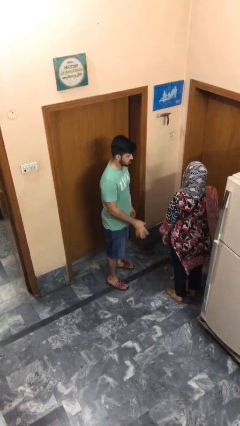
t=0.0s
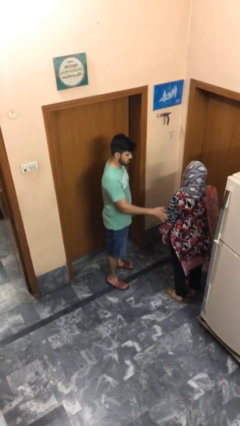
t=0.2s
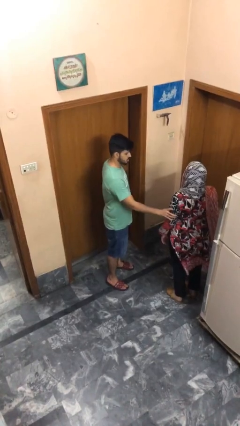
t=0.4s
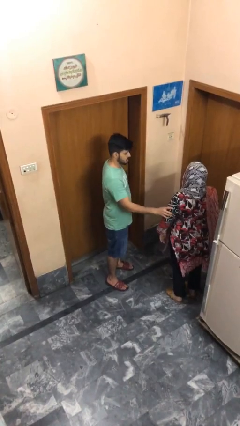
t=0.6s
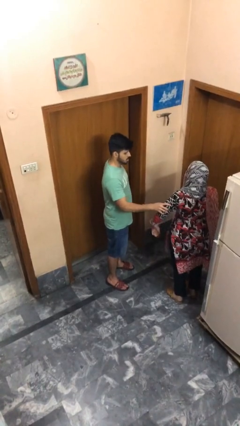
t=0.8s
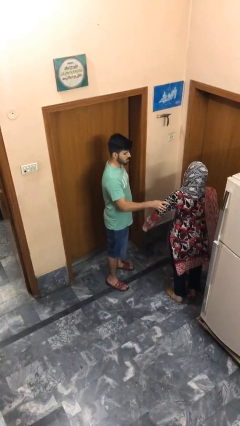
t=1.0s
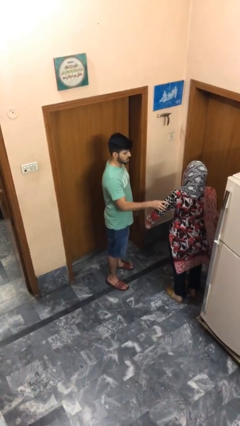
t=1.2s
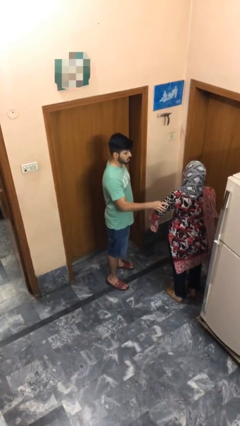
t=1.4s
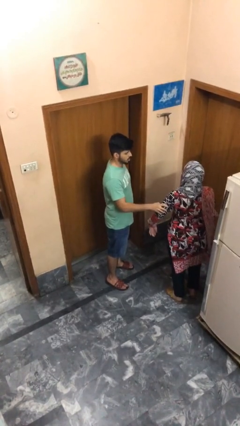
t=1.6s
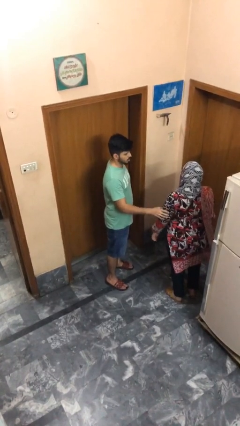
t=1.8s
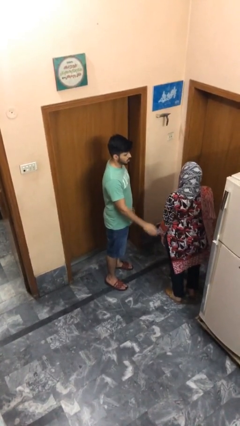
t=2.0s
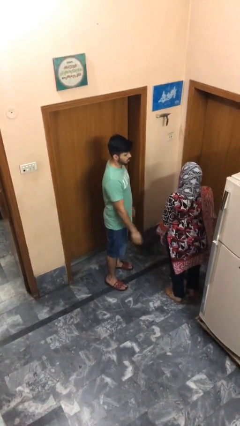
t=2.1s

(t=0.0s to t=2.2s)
person grabs person by bicep

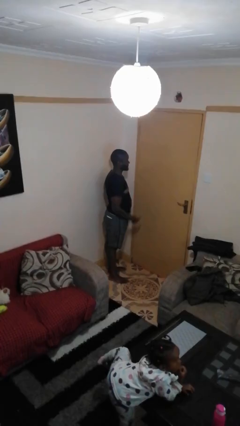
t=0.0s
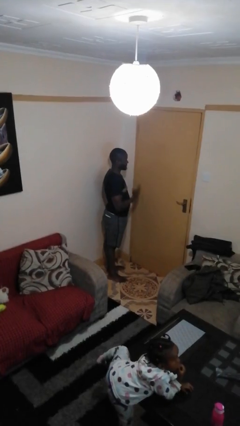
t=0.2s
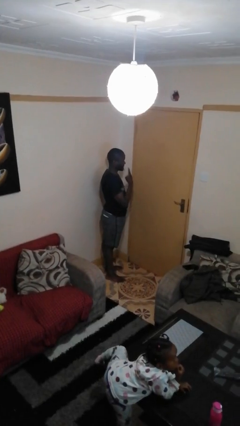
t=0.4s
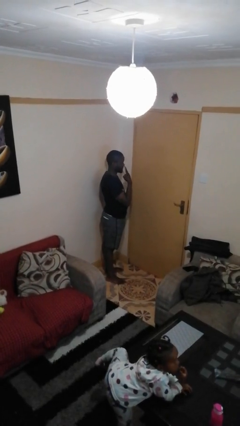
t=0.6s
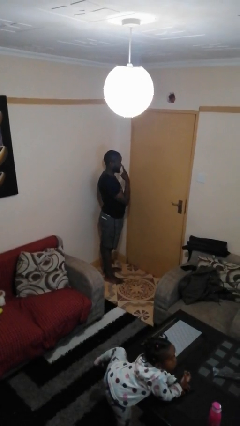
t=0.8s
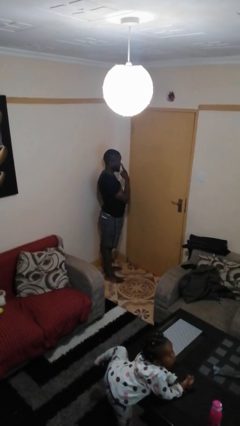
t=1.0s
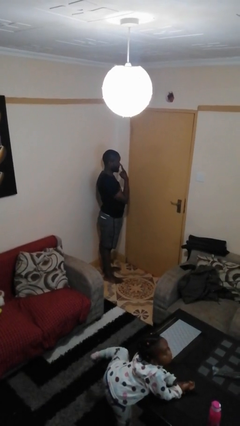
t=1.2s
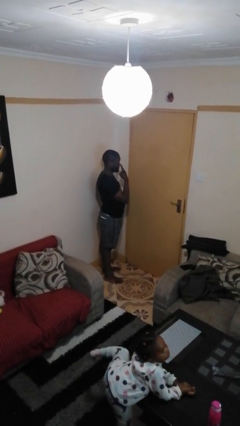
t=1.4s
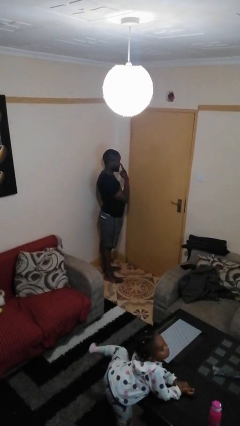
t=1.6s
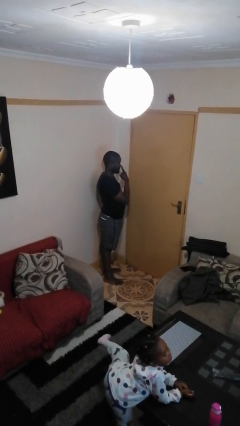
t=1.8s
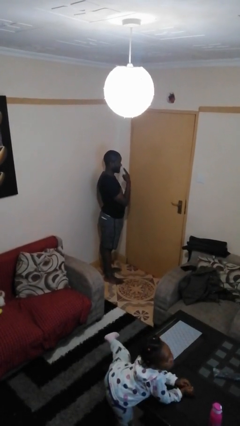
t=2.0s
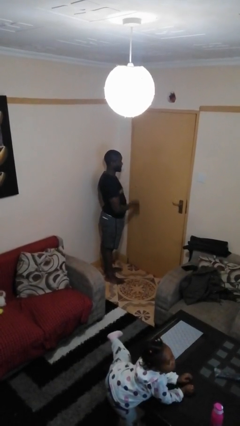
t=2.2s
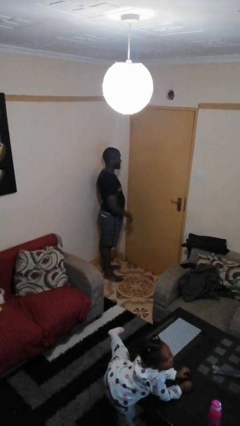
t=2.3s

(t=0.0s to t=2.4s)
person gestures watch closely

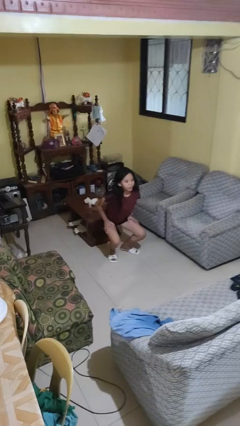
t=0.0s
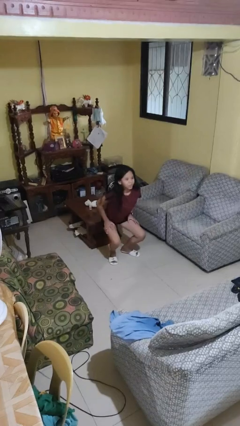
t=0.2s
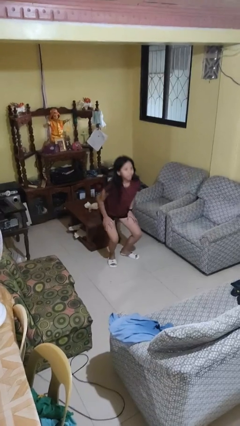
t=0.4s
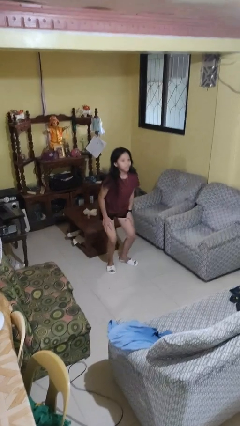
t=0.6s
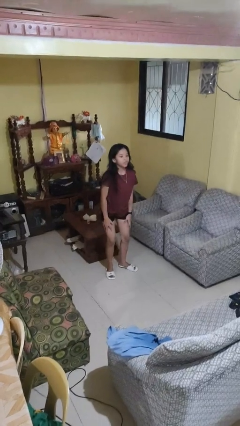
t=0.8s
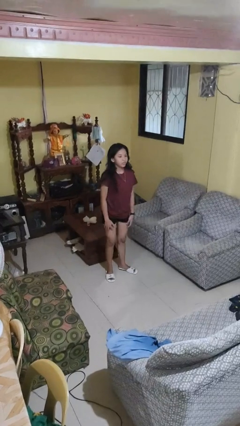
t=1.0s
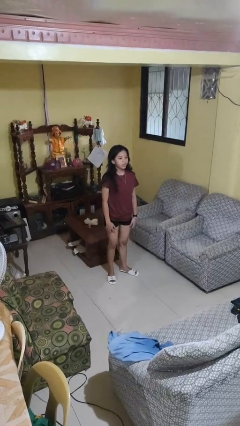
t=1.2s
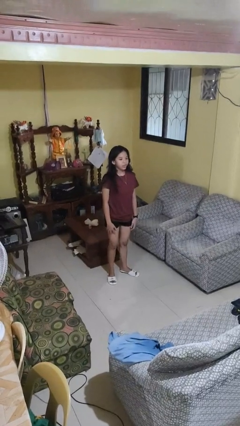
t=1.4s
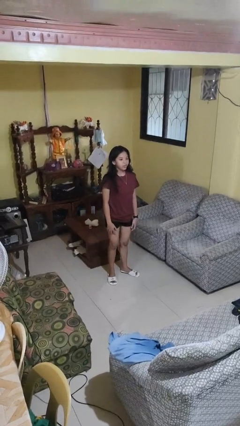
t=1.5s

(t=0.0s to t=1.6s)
person stands up

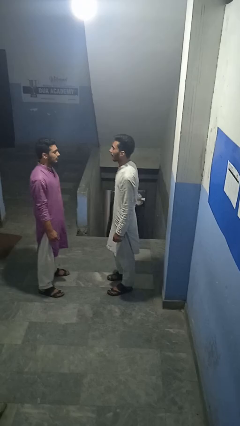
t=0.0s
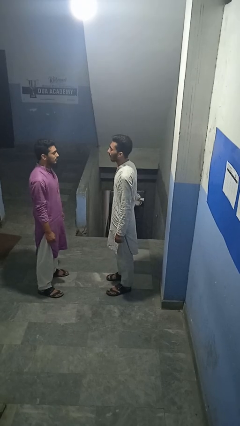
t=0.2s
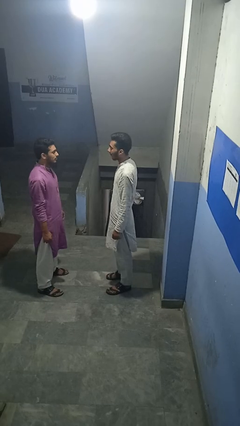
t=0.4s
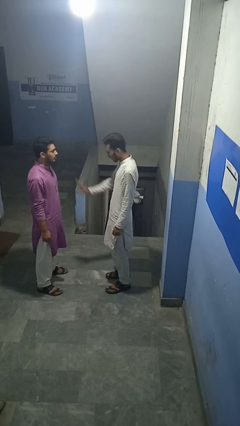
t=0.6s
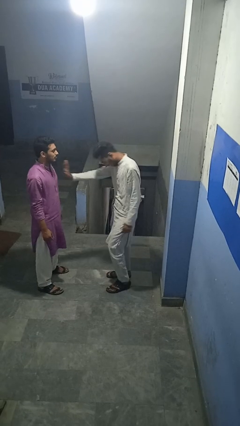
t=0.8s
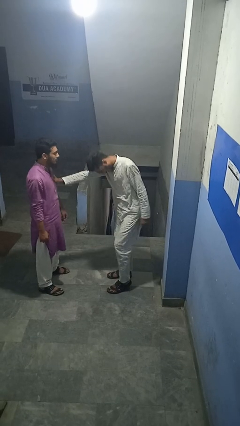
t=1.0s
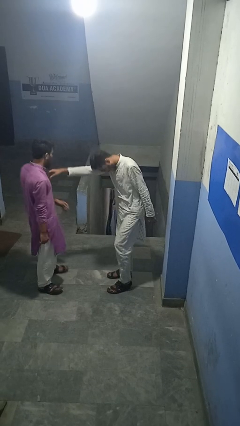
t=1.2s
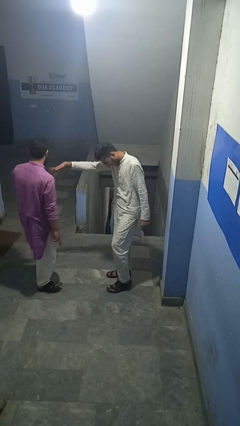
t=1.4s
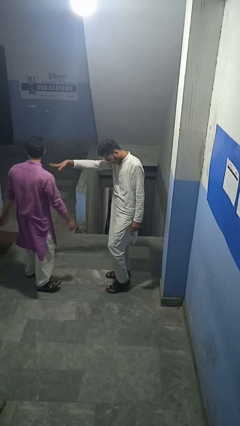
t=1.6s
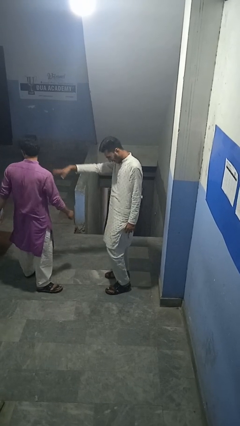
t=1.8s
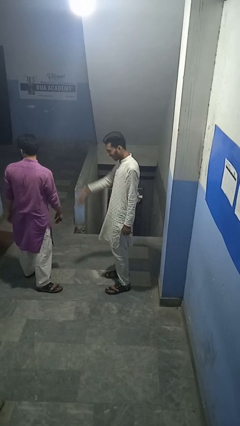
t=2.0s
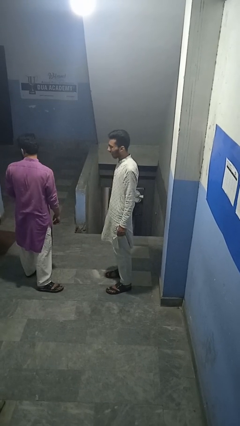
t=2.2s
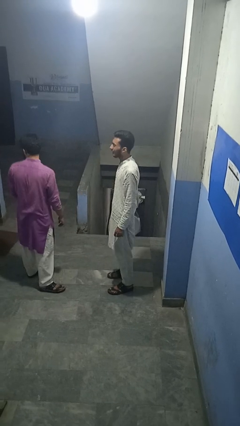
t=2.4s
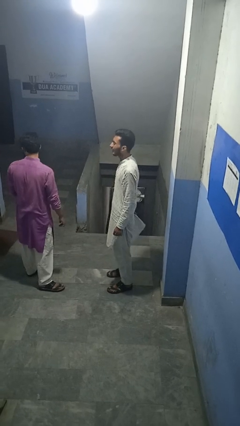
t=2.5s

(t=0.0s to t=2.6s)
person shoves person

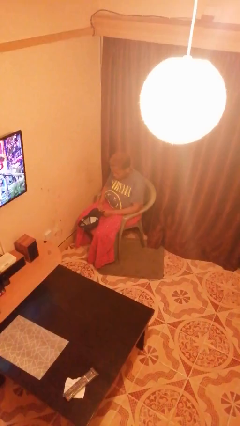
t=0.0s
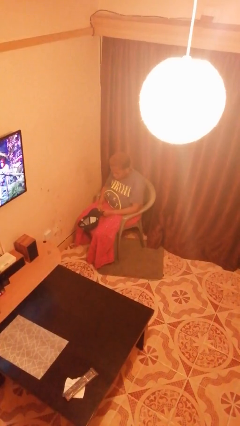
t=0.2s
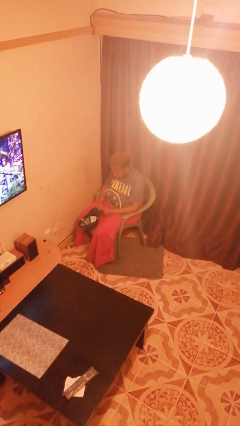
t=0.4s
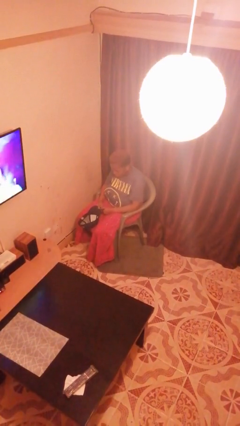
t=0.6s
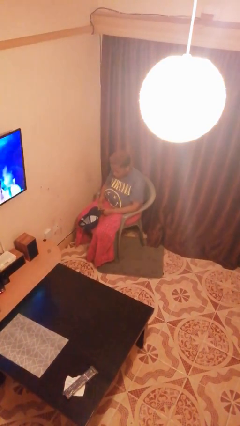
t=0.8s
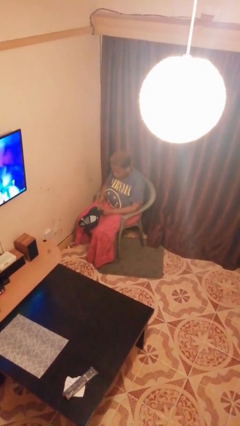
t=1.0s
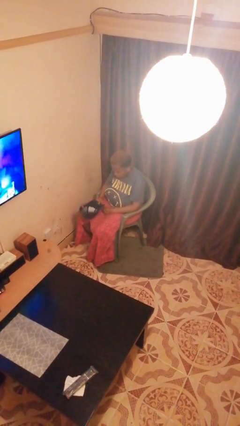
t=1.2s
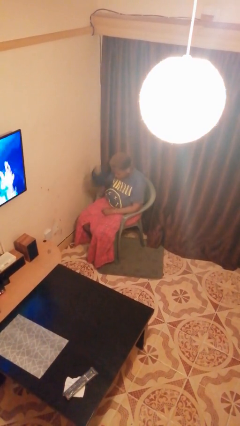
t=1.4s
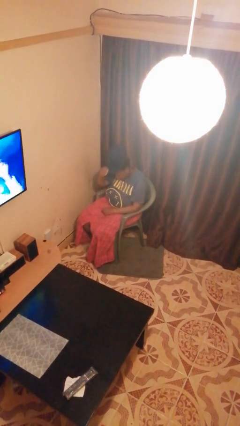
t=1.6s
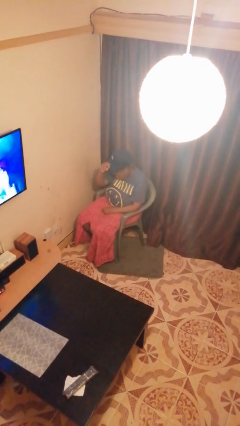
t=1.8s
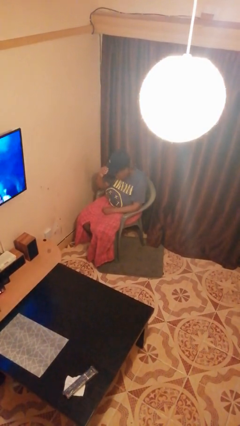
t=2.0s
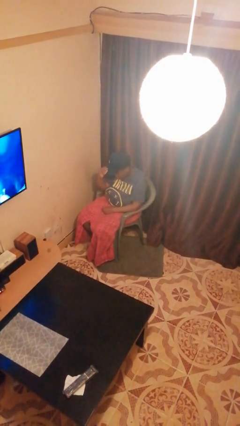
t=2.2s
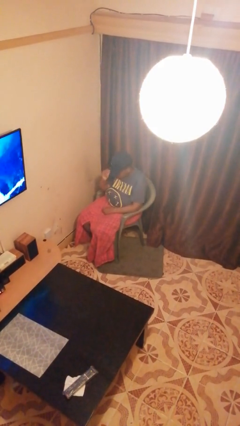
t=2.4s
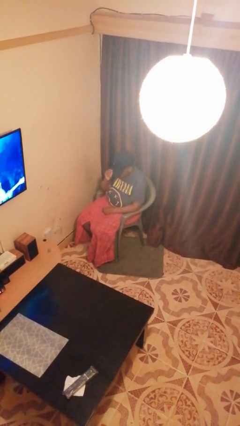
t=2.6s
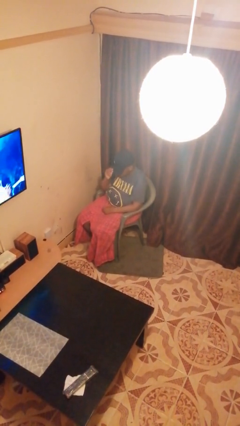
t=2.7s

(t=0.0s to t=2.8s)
person puts on hat

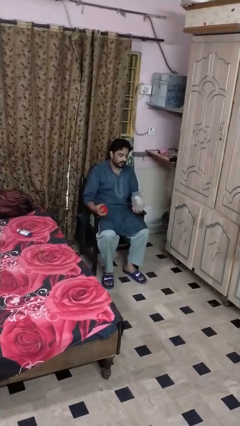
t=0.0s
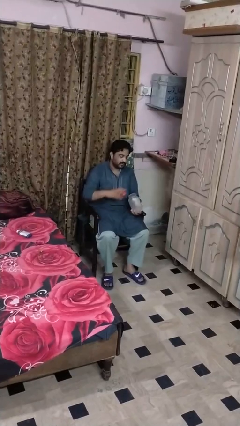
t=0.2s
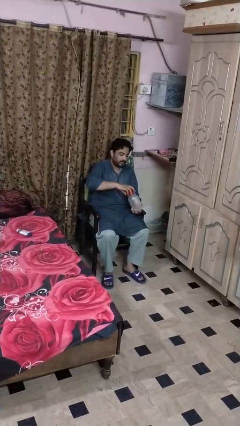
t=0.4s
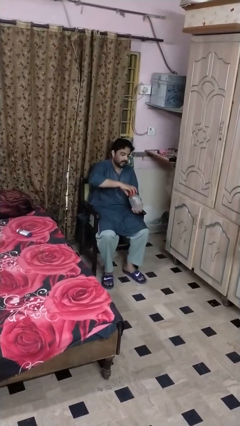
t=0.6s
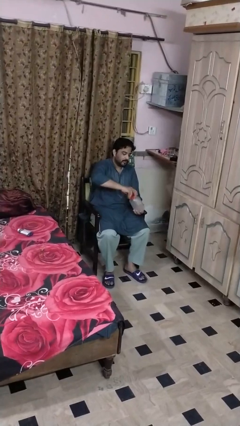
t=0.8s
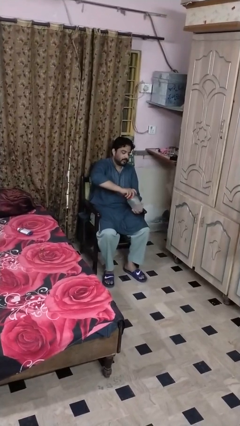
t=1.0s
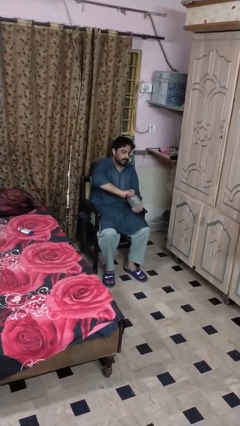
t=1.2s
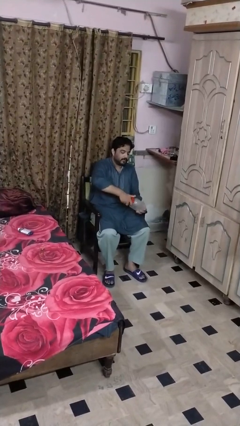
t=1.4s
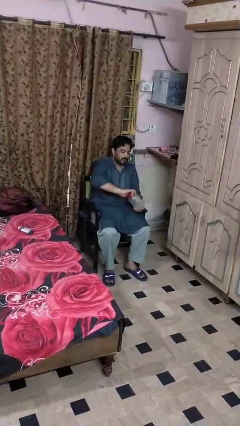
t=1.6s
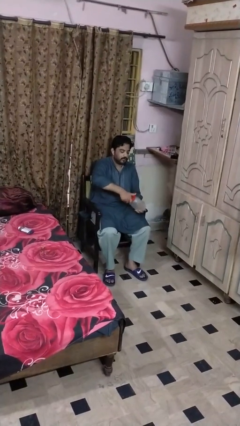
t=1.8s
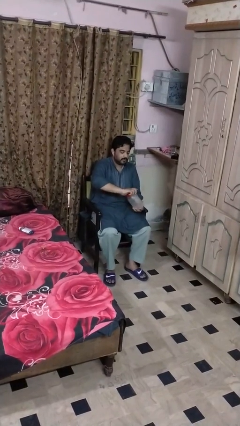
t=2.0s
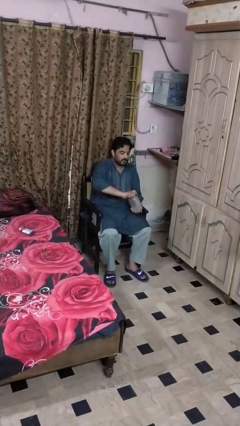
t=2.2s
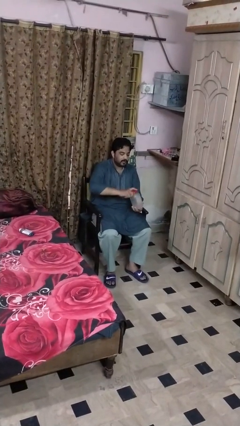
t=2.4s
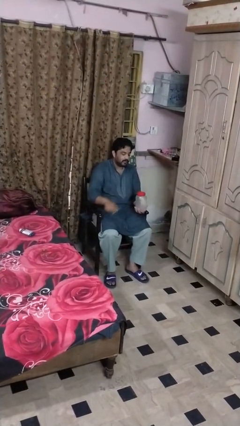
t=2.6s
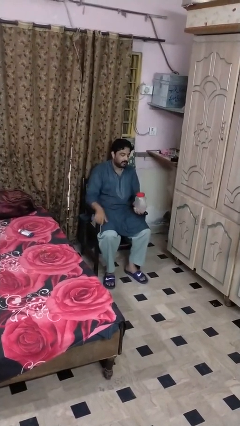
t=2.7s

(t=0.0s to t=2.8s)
person closes jar

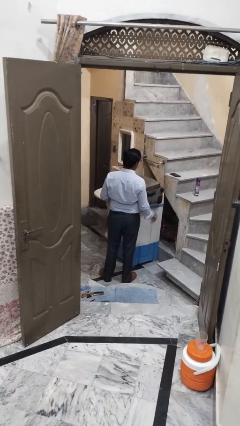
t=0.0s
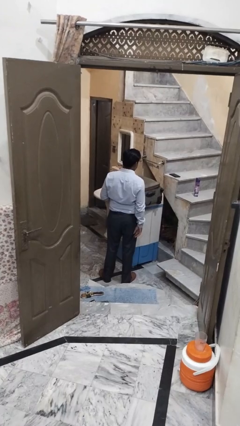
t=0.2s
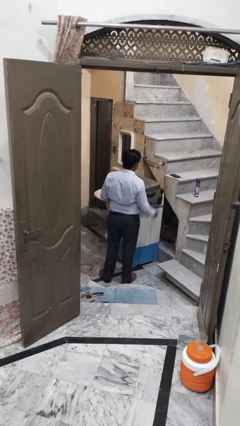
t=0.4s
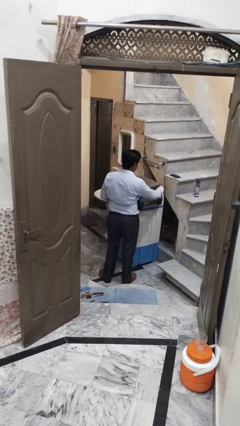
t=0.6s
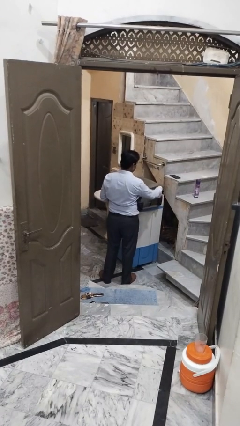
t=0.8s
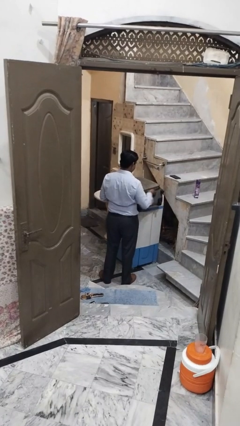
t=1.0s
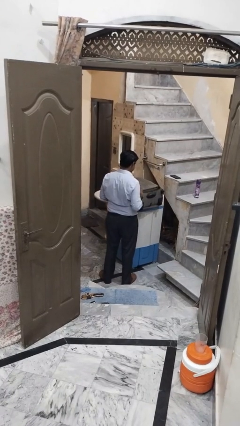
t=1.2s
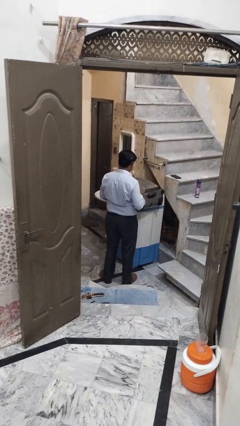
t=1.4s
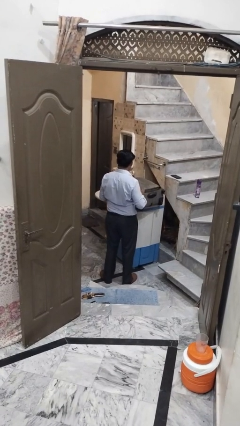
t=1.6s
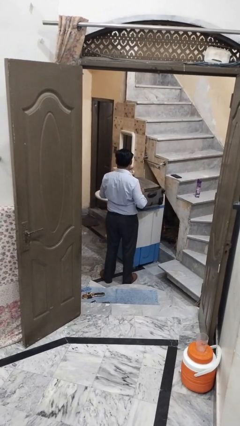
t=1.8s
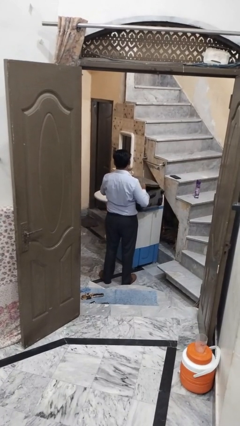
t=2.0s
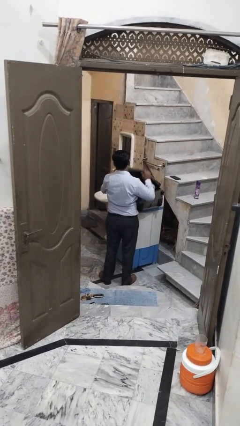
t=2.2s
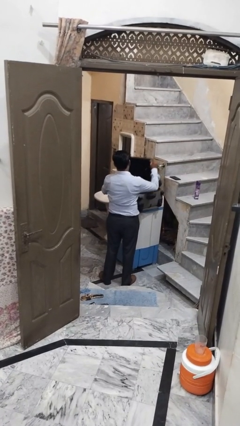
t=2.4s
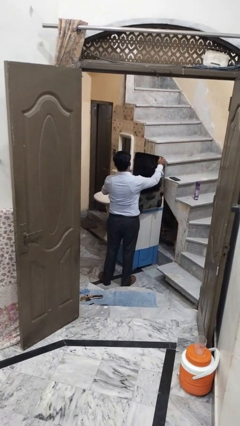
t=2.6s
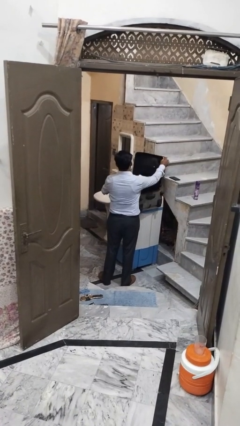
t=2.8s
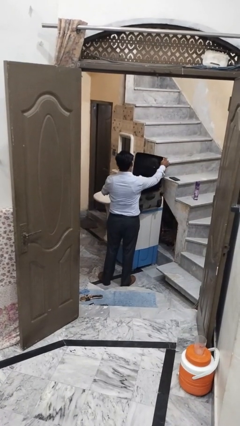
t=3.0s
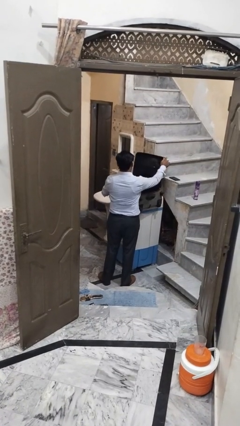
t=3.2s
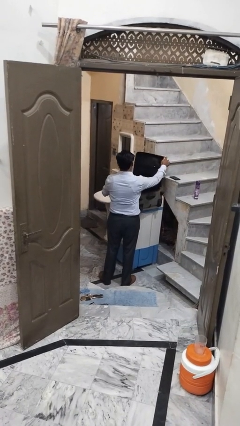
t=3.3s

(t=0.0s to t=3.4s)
person opens suitcase
